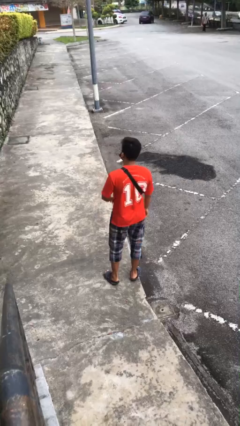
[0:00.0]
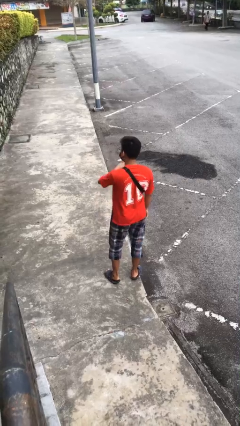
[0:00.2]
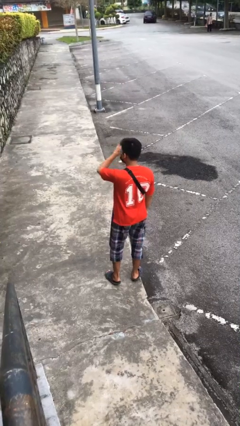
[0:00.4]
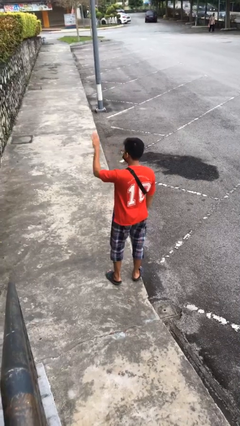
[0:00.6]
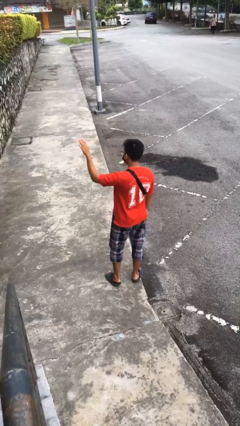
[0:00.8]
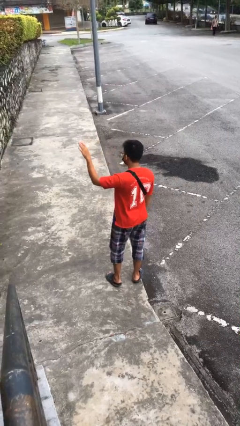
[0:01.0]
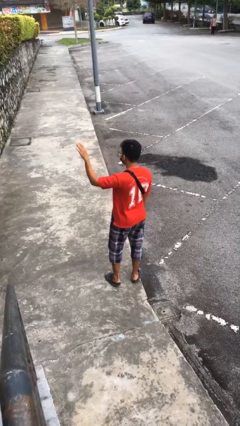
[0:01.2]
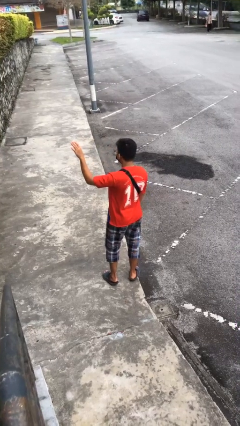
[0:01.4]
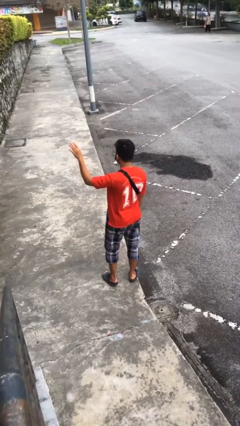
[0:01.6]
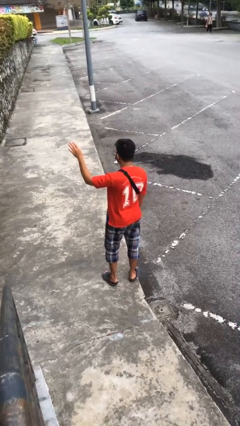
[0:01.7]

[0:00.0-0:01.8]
person gestures swipe left

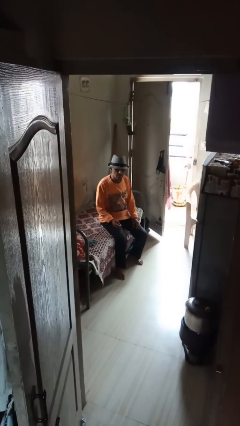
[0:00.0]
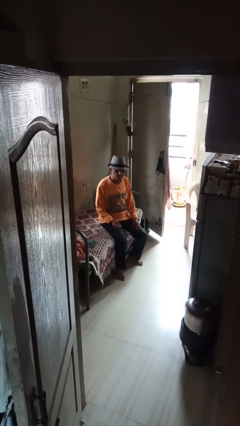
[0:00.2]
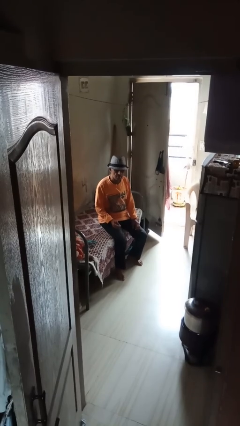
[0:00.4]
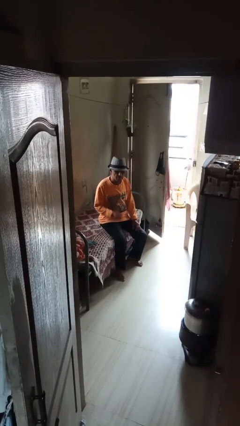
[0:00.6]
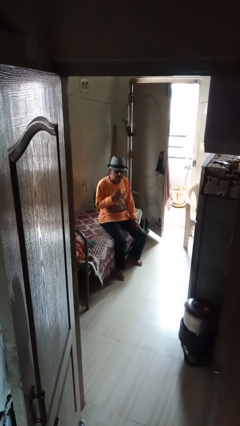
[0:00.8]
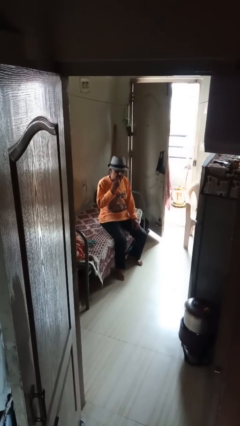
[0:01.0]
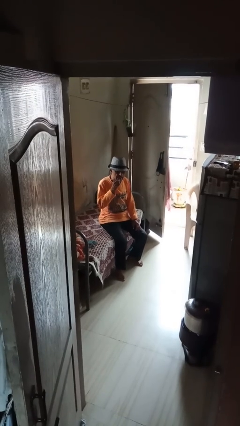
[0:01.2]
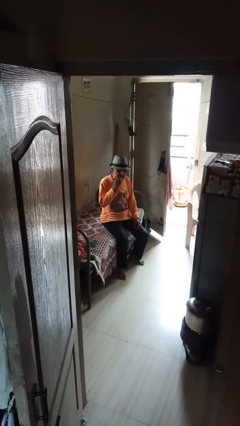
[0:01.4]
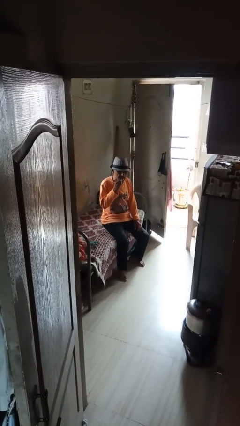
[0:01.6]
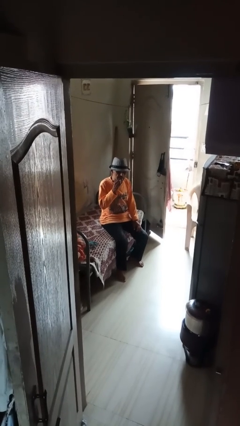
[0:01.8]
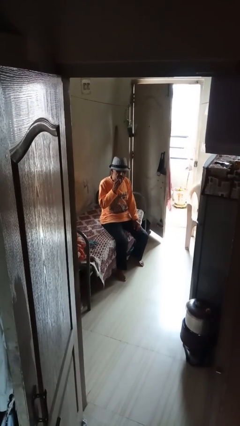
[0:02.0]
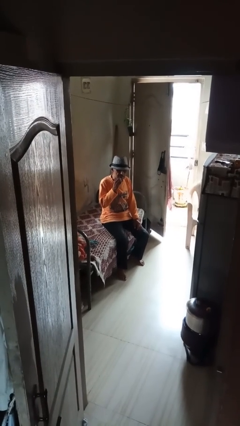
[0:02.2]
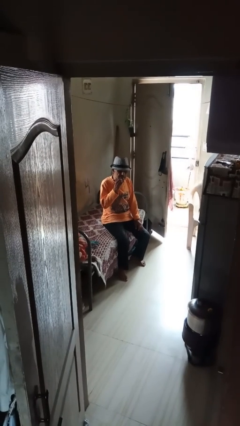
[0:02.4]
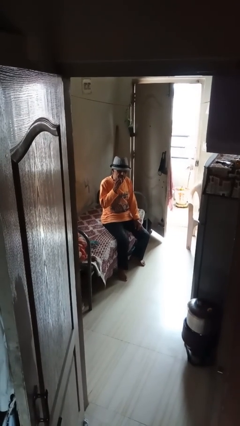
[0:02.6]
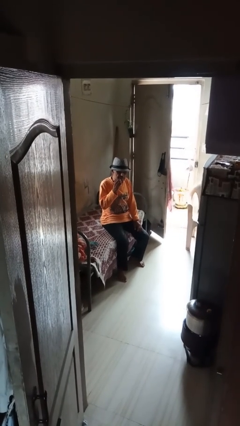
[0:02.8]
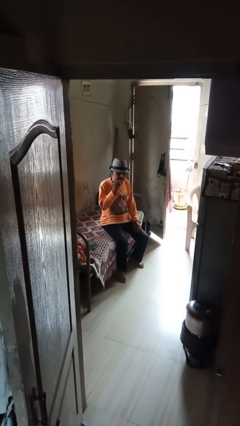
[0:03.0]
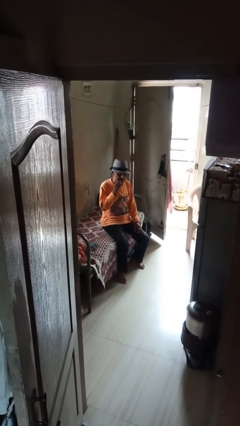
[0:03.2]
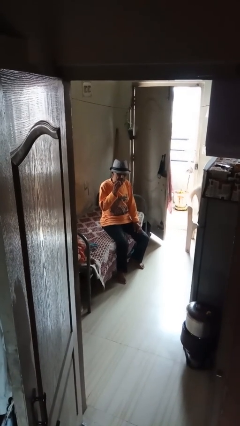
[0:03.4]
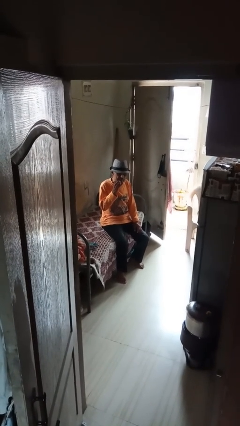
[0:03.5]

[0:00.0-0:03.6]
person flosses

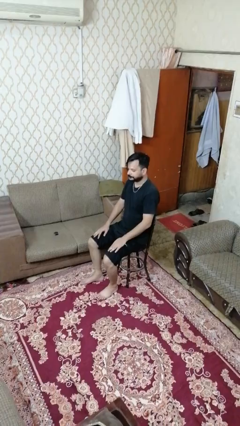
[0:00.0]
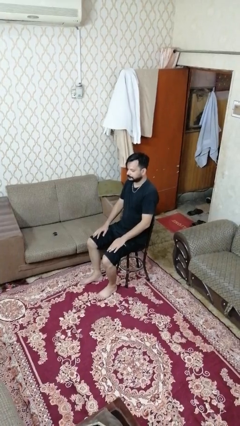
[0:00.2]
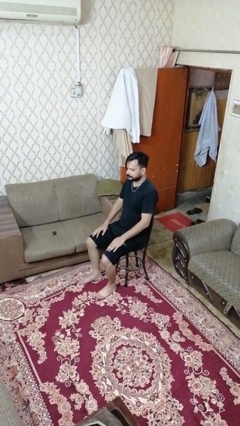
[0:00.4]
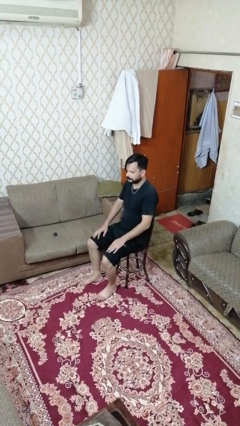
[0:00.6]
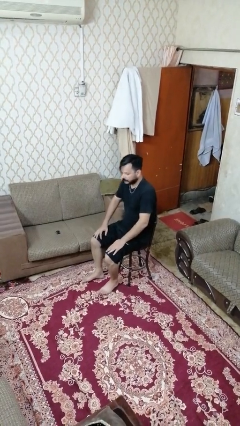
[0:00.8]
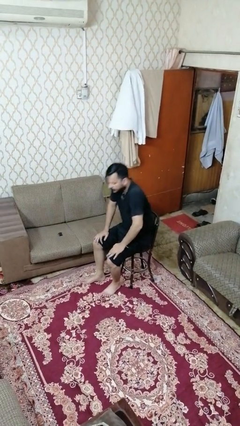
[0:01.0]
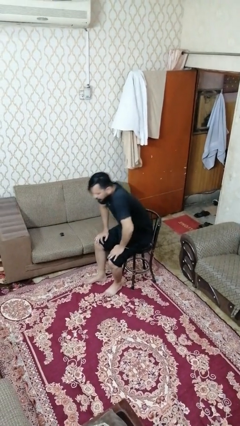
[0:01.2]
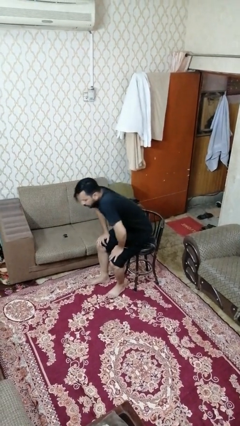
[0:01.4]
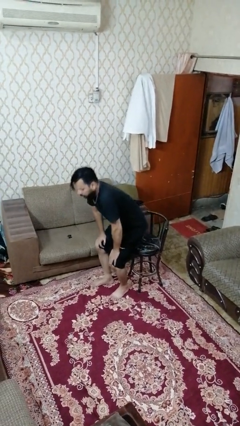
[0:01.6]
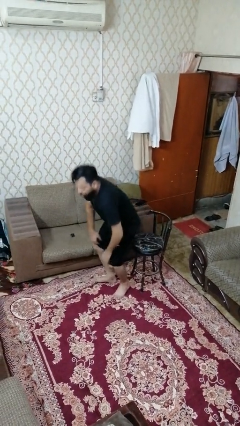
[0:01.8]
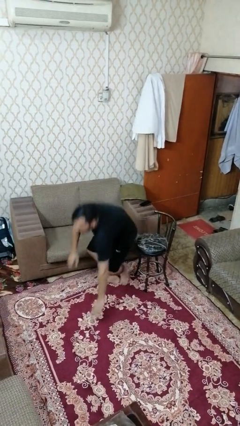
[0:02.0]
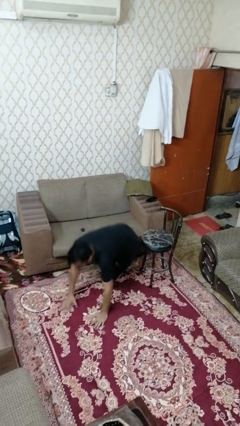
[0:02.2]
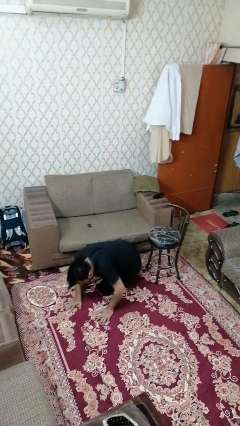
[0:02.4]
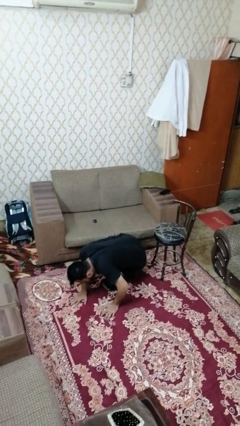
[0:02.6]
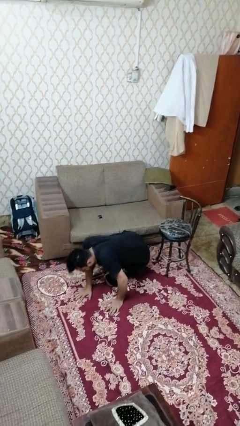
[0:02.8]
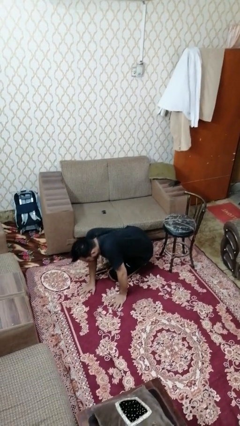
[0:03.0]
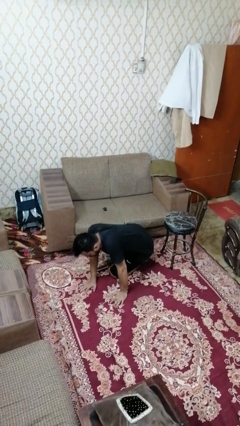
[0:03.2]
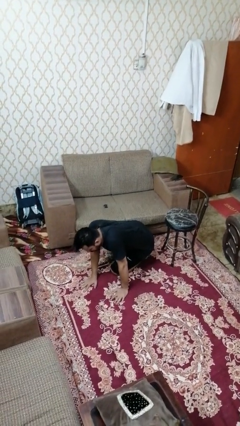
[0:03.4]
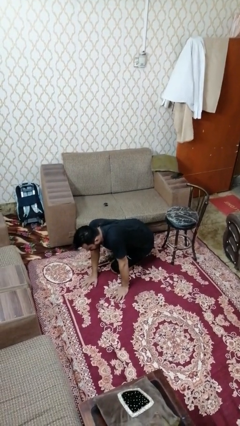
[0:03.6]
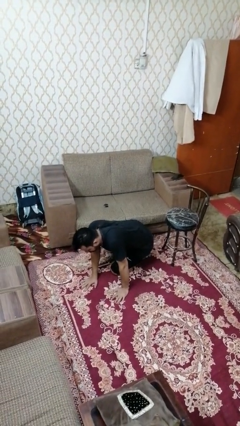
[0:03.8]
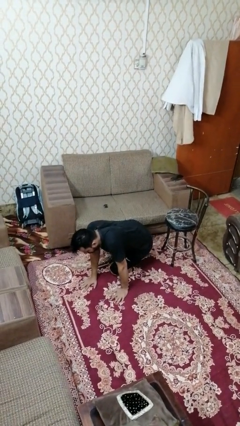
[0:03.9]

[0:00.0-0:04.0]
person falls from chair

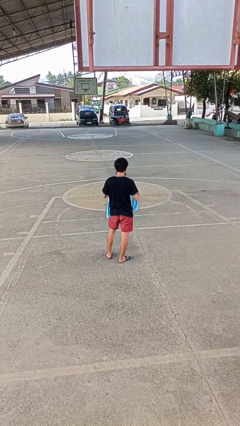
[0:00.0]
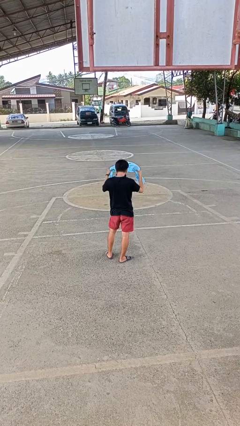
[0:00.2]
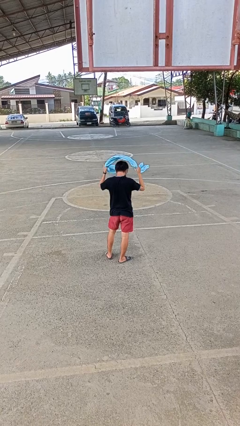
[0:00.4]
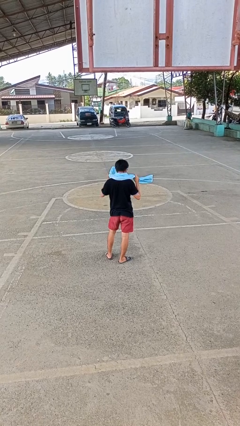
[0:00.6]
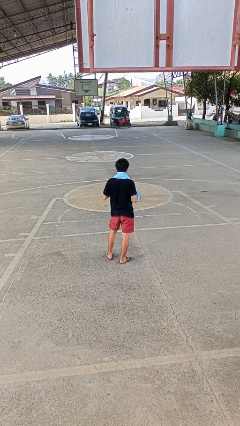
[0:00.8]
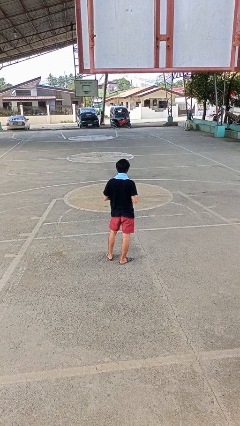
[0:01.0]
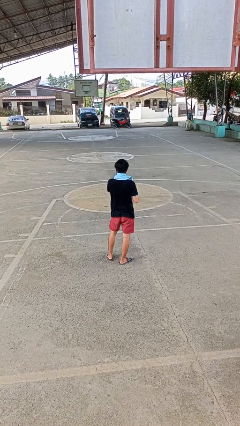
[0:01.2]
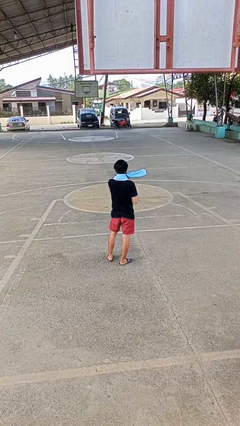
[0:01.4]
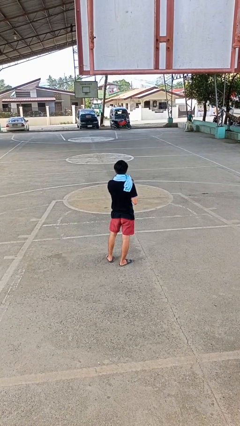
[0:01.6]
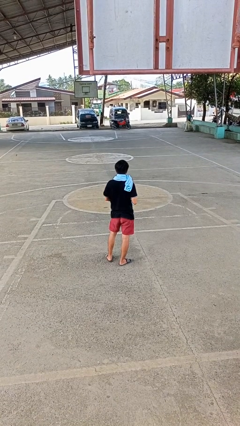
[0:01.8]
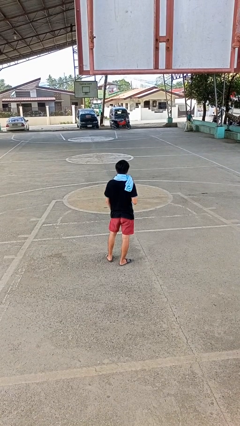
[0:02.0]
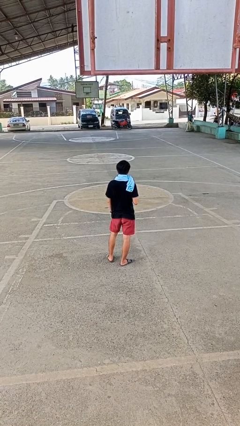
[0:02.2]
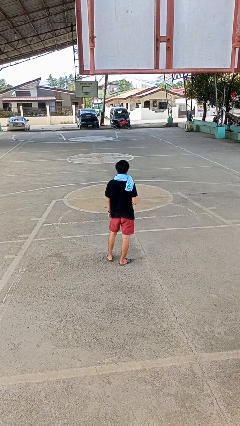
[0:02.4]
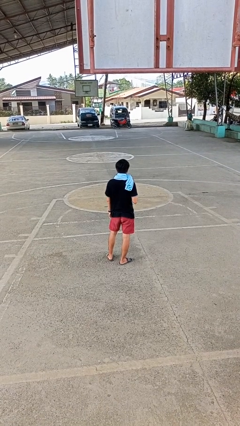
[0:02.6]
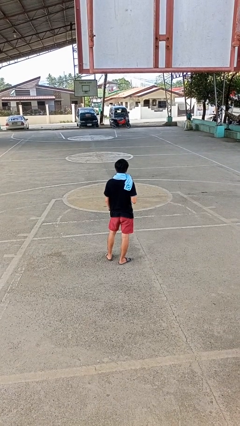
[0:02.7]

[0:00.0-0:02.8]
person puts on scarf

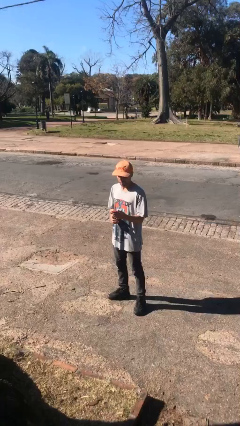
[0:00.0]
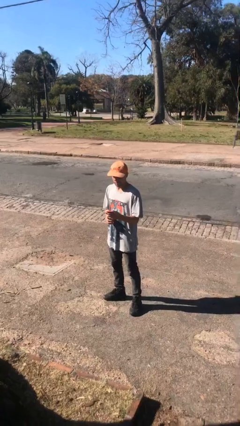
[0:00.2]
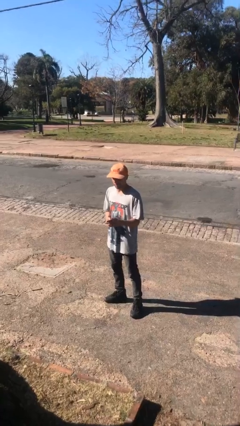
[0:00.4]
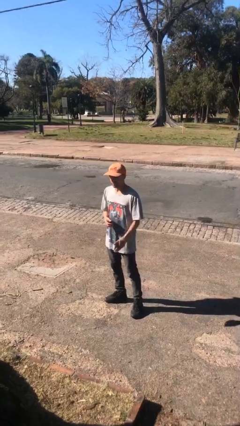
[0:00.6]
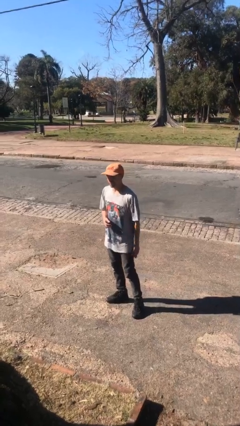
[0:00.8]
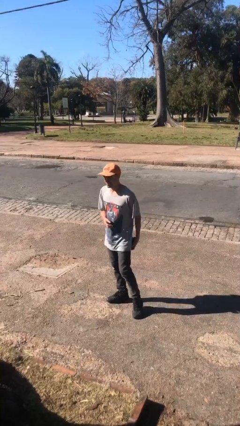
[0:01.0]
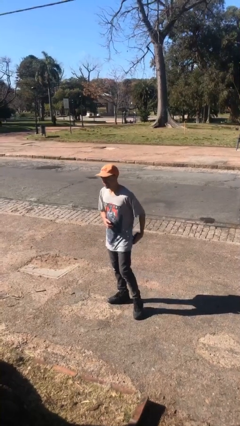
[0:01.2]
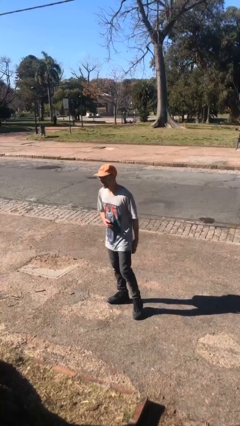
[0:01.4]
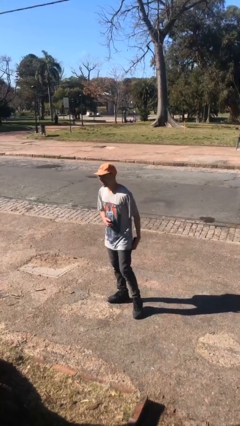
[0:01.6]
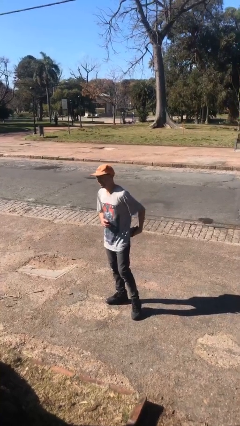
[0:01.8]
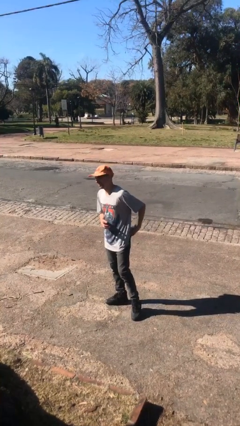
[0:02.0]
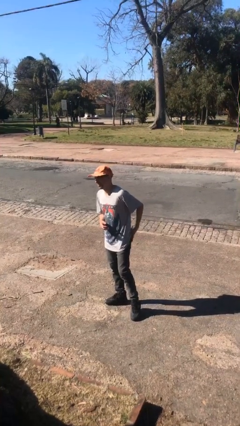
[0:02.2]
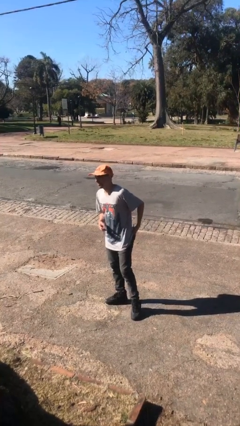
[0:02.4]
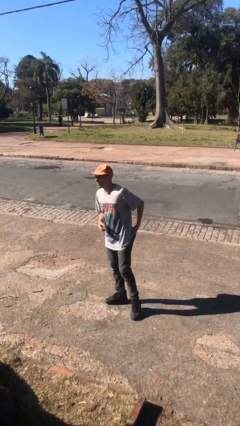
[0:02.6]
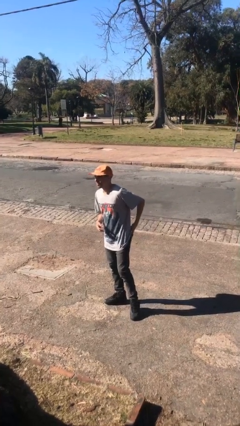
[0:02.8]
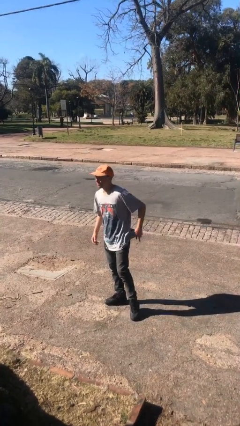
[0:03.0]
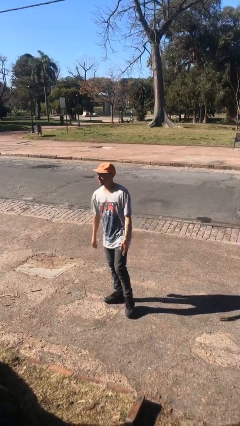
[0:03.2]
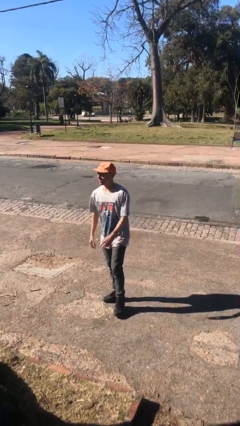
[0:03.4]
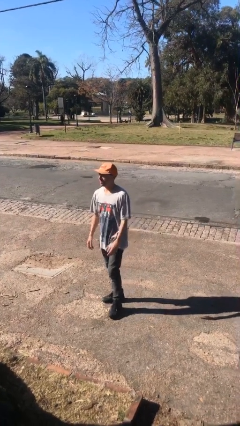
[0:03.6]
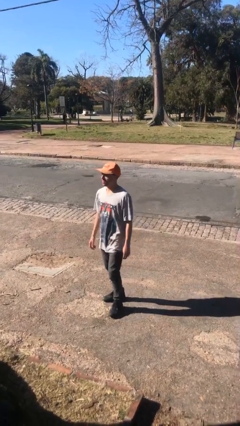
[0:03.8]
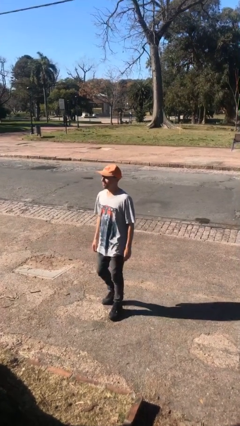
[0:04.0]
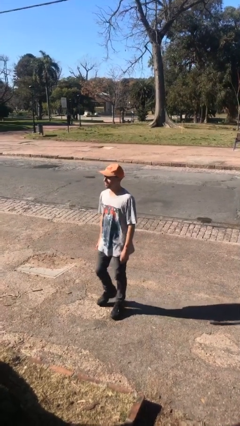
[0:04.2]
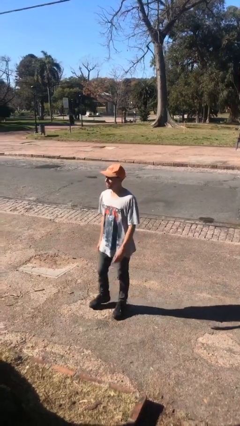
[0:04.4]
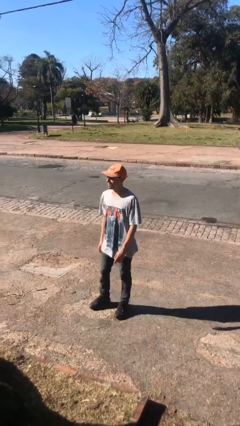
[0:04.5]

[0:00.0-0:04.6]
person puts phone into pocket

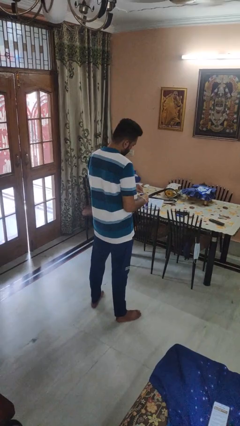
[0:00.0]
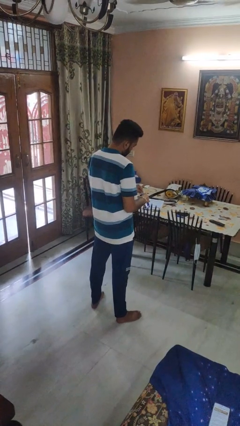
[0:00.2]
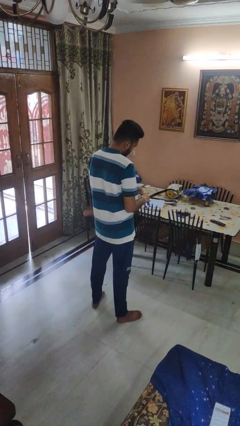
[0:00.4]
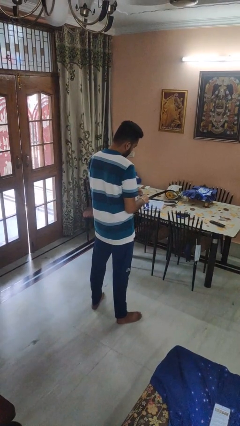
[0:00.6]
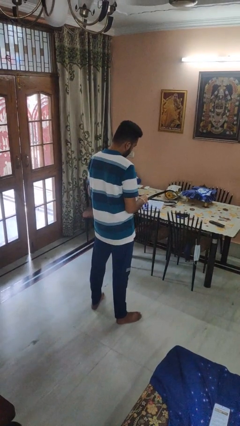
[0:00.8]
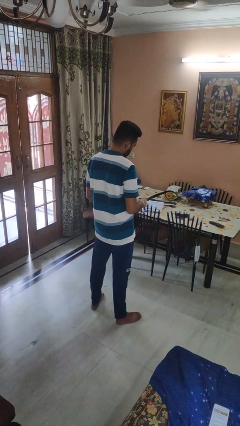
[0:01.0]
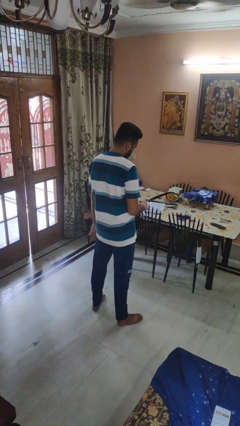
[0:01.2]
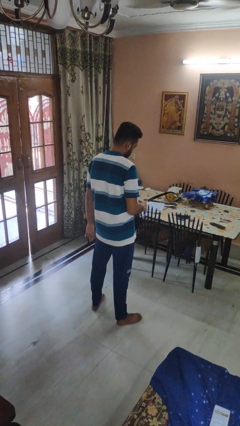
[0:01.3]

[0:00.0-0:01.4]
person opens beverage can
